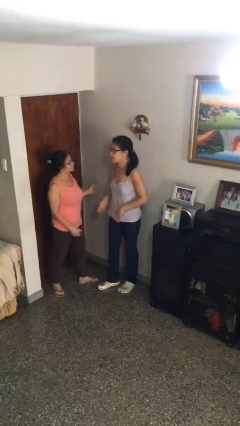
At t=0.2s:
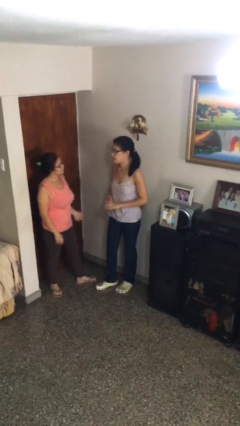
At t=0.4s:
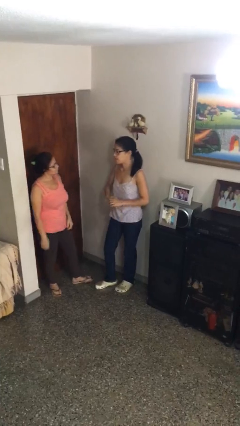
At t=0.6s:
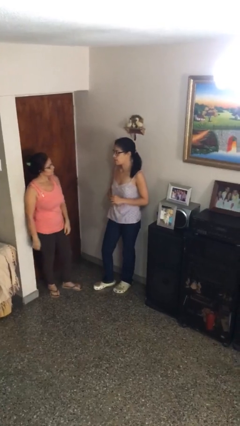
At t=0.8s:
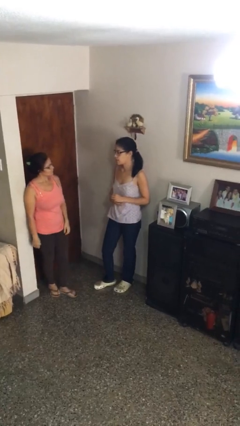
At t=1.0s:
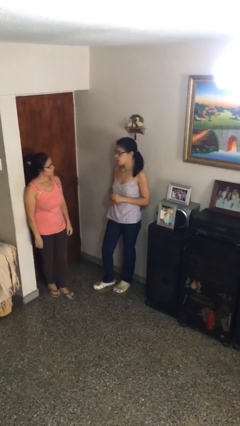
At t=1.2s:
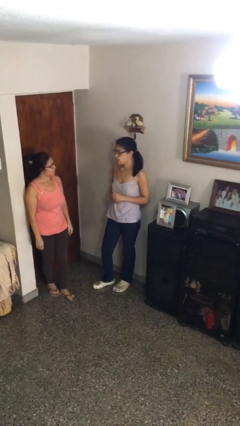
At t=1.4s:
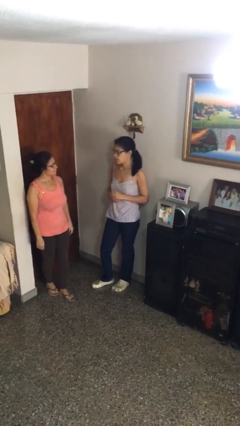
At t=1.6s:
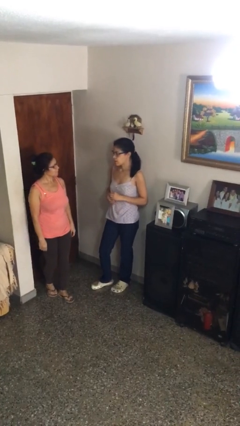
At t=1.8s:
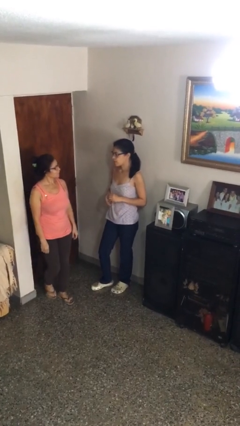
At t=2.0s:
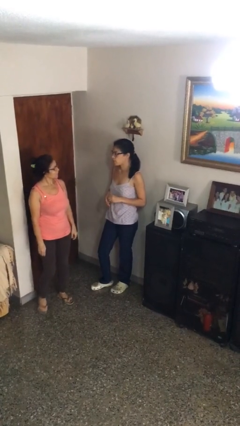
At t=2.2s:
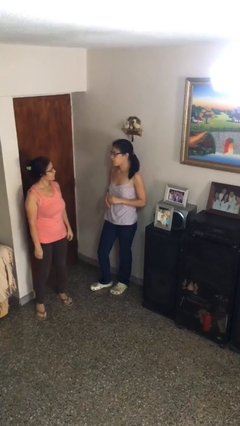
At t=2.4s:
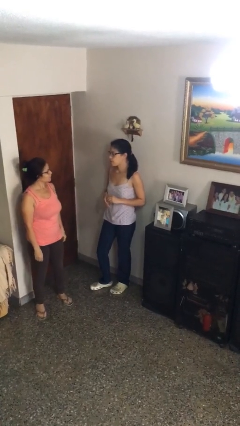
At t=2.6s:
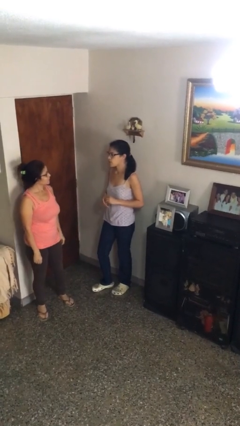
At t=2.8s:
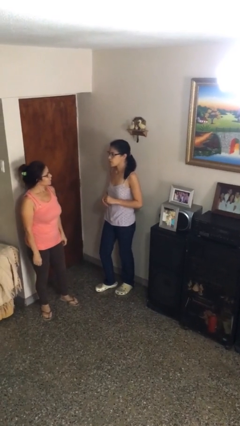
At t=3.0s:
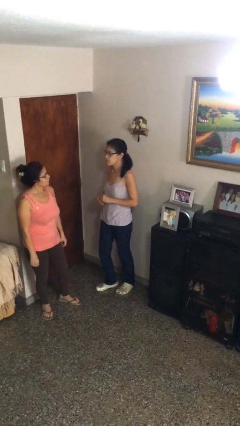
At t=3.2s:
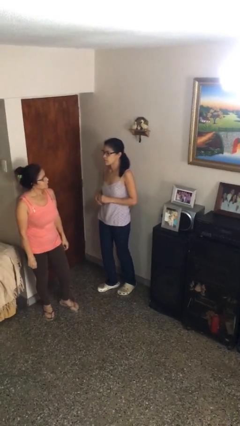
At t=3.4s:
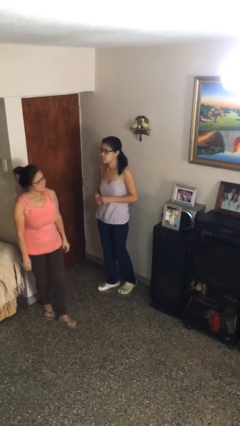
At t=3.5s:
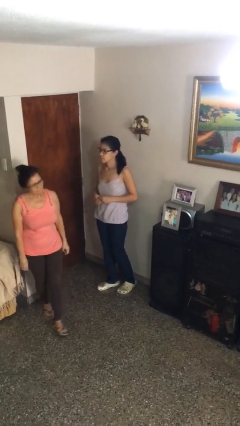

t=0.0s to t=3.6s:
person talks to person

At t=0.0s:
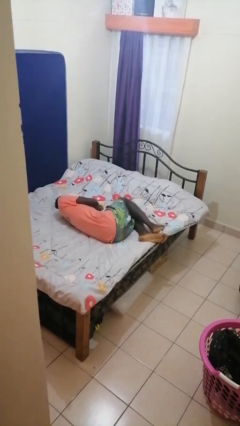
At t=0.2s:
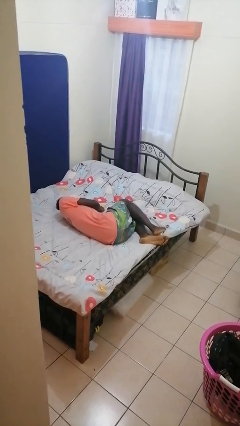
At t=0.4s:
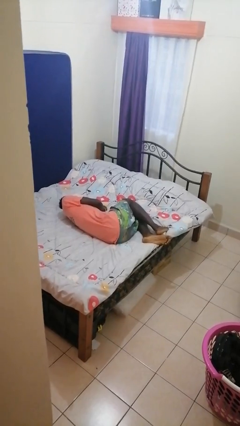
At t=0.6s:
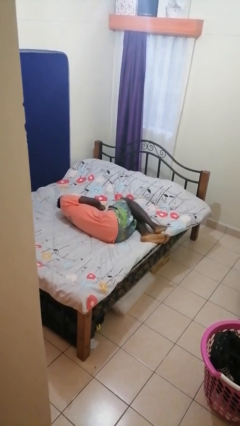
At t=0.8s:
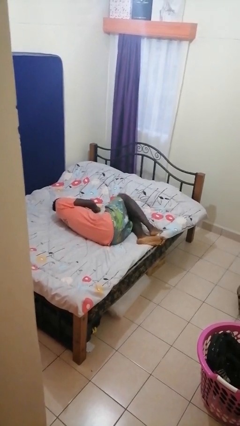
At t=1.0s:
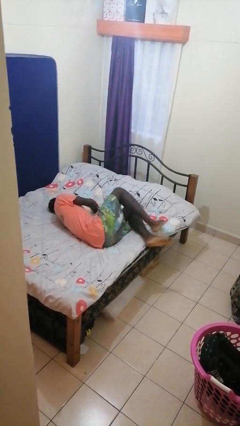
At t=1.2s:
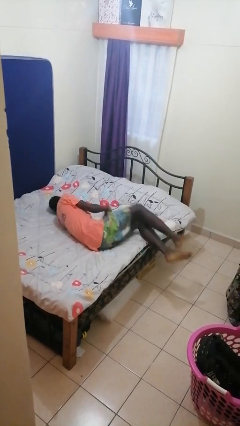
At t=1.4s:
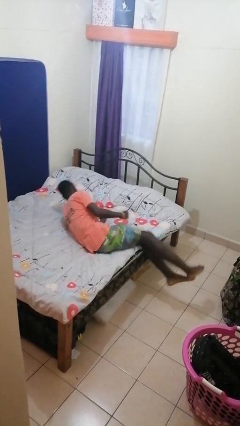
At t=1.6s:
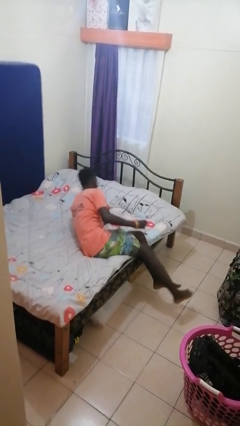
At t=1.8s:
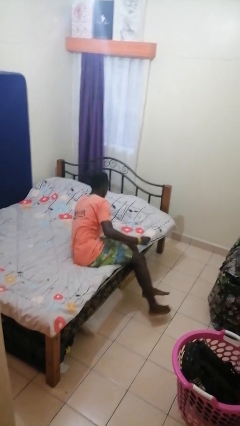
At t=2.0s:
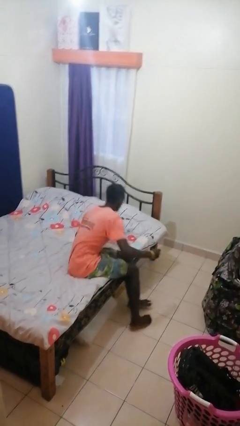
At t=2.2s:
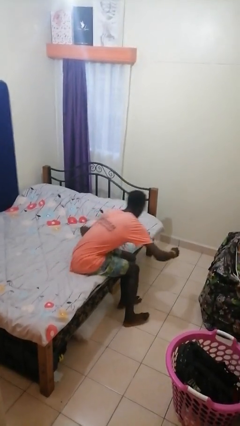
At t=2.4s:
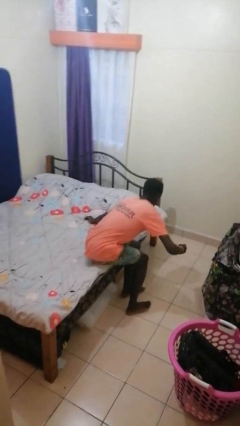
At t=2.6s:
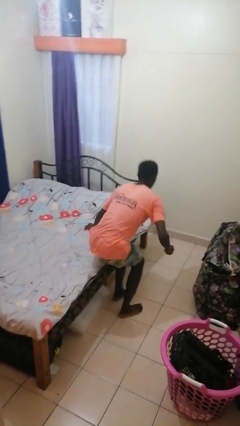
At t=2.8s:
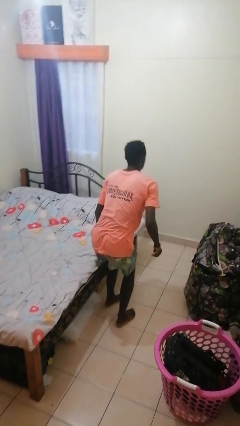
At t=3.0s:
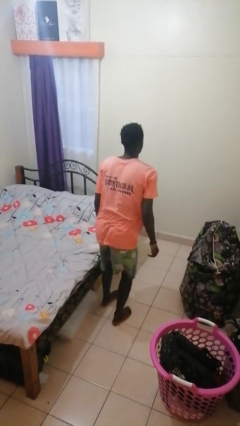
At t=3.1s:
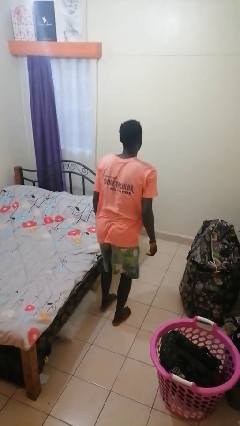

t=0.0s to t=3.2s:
person takes off shoes

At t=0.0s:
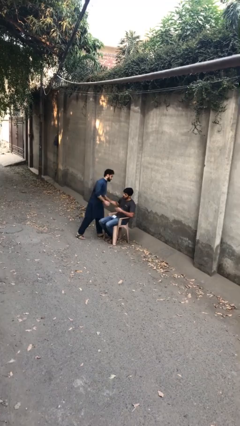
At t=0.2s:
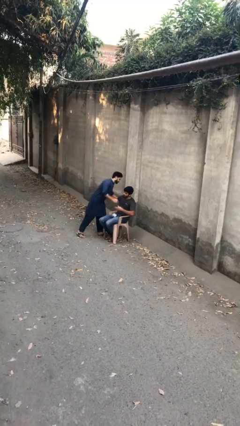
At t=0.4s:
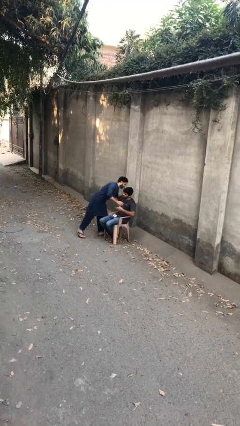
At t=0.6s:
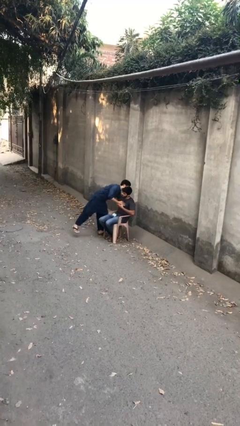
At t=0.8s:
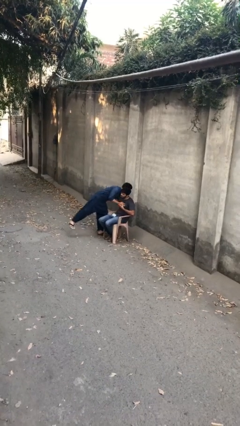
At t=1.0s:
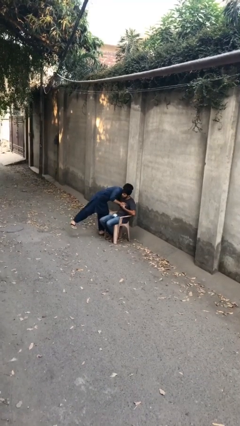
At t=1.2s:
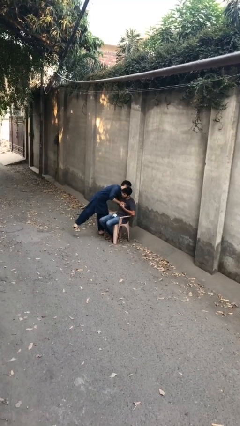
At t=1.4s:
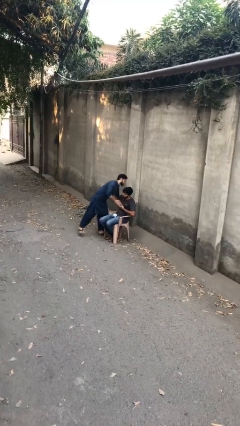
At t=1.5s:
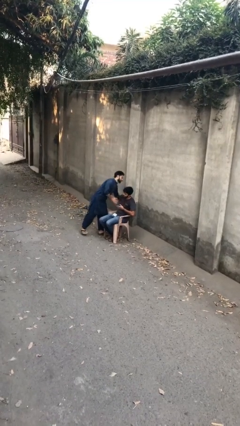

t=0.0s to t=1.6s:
person embraces person

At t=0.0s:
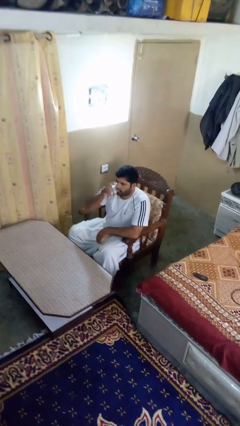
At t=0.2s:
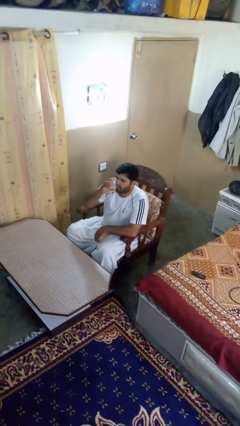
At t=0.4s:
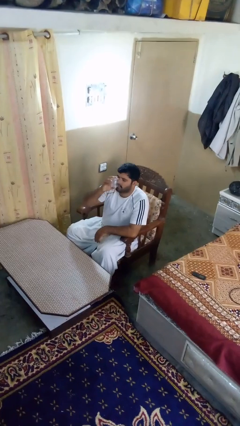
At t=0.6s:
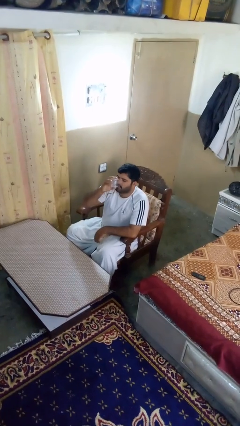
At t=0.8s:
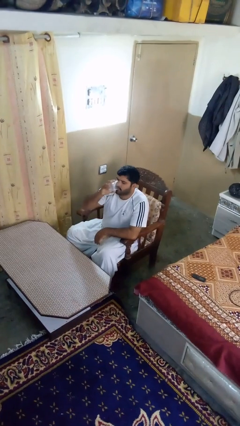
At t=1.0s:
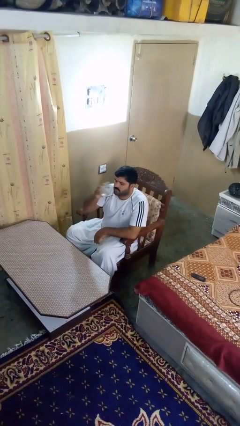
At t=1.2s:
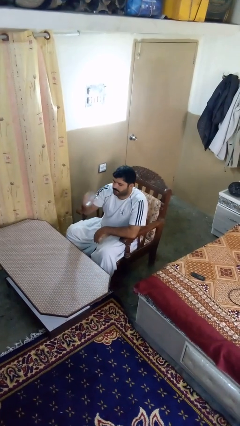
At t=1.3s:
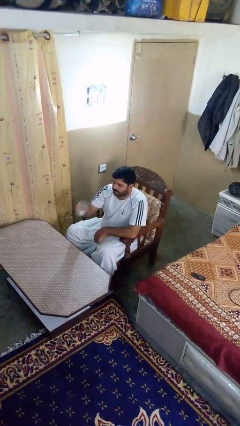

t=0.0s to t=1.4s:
person drinks from shotglass

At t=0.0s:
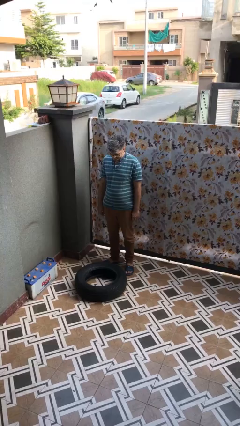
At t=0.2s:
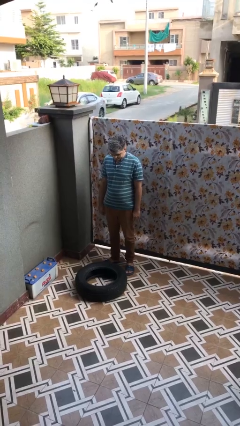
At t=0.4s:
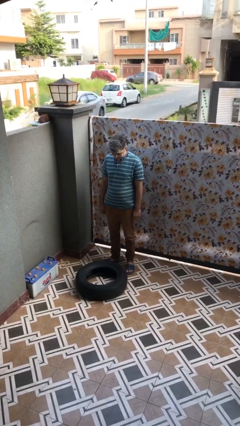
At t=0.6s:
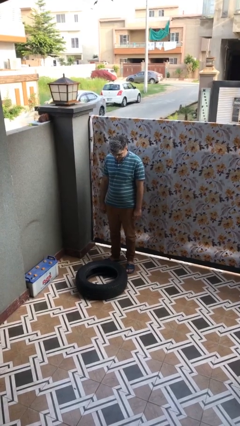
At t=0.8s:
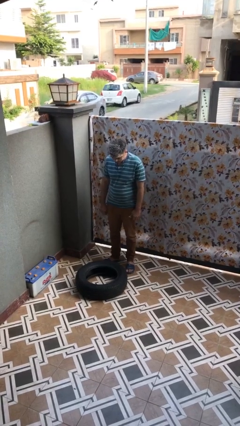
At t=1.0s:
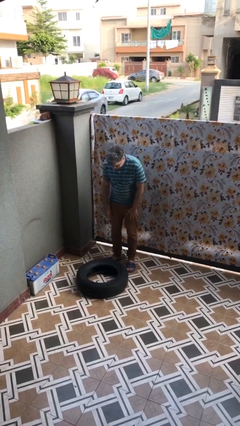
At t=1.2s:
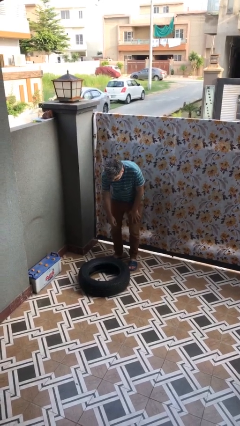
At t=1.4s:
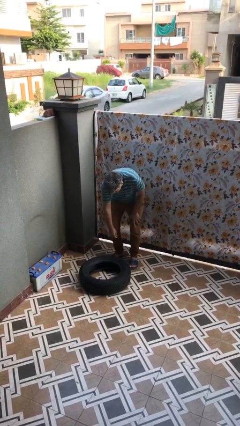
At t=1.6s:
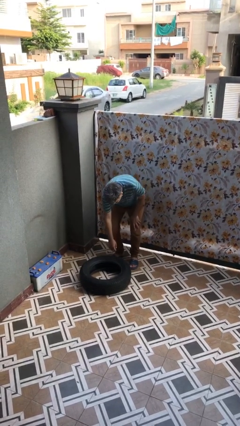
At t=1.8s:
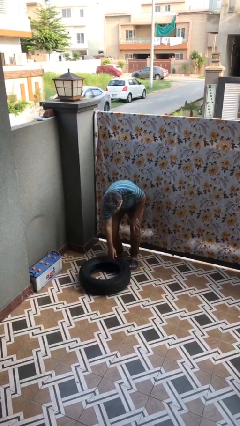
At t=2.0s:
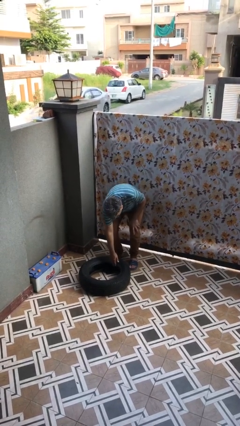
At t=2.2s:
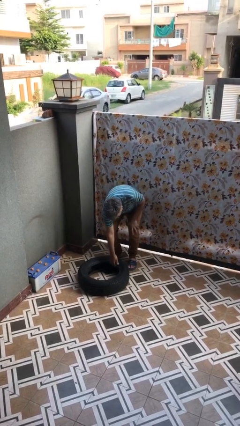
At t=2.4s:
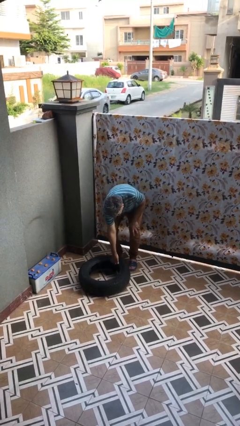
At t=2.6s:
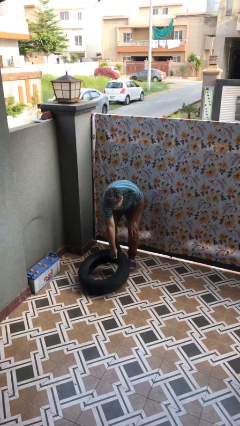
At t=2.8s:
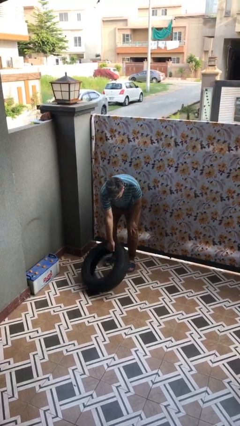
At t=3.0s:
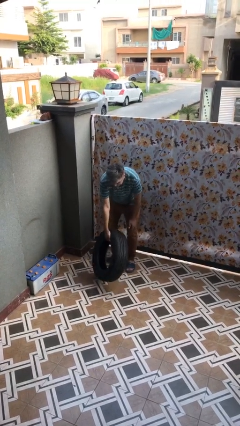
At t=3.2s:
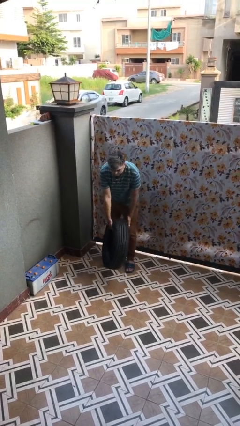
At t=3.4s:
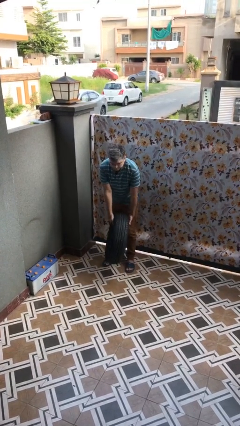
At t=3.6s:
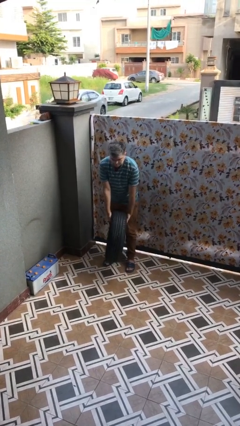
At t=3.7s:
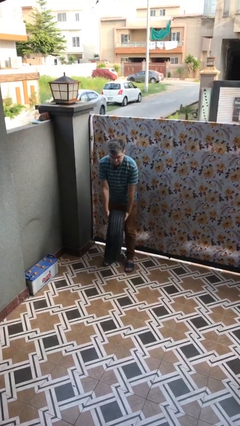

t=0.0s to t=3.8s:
person picks up object from floor

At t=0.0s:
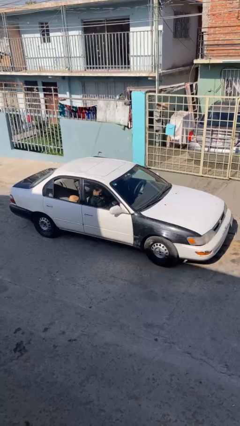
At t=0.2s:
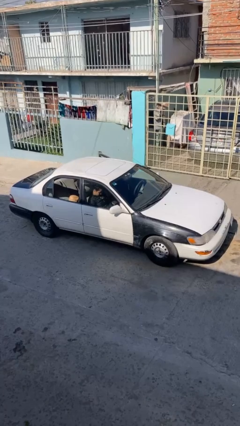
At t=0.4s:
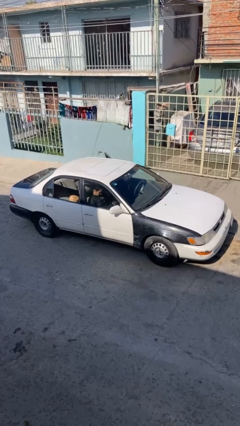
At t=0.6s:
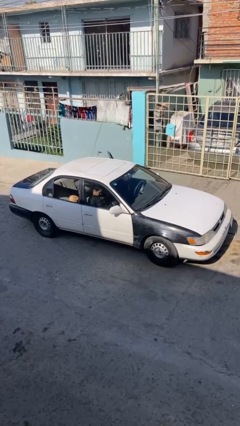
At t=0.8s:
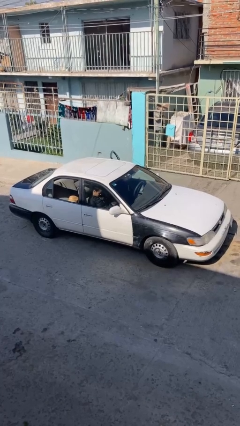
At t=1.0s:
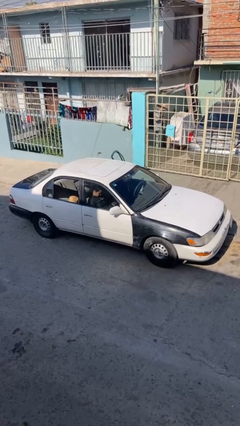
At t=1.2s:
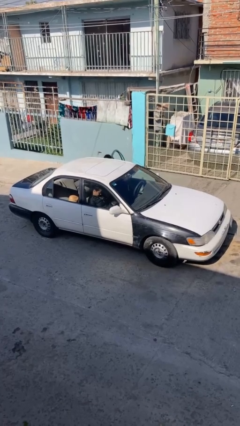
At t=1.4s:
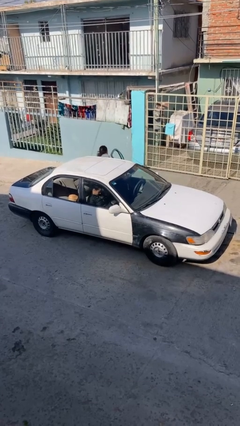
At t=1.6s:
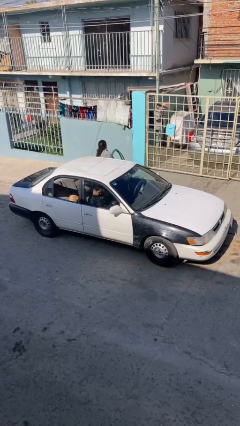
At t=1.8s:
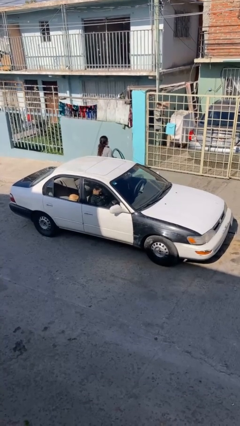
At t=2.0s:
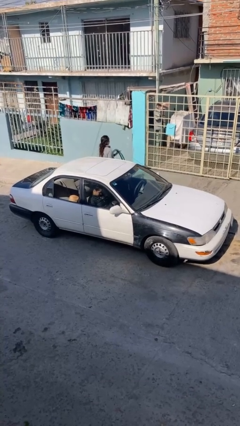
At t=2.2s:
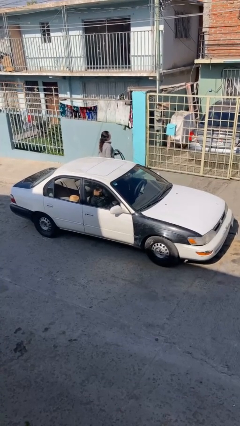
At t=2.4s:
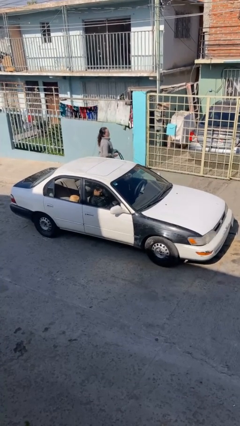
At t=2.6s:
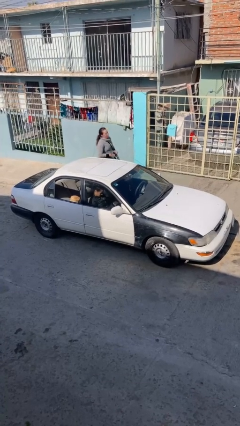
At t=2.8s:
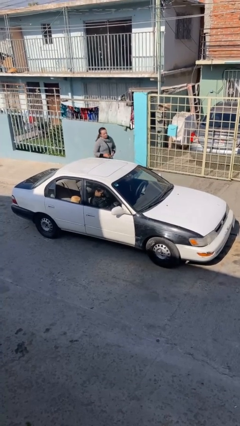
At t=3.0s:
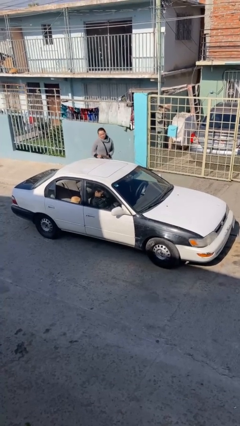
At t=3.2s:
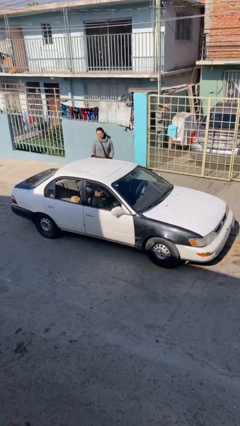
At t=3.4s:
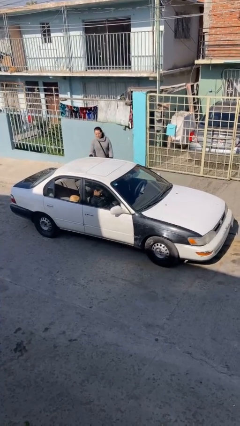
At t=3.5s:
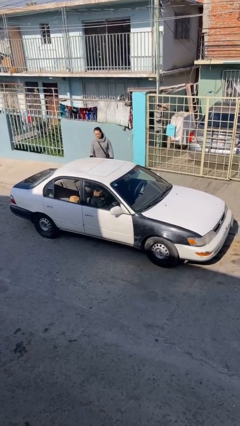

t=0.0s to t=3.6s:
car drops off person
